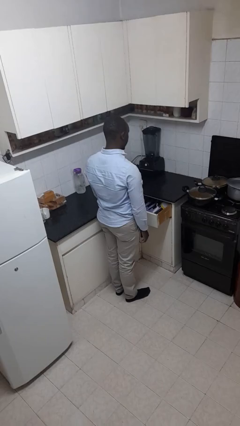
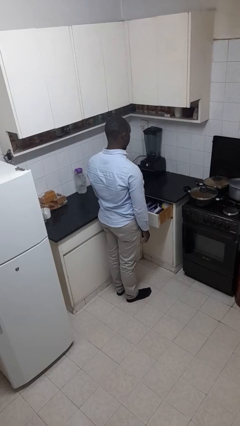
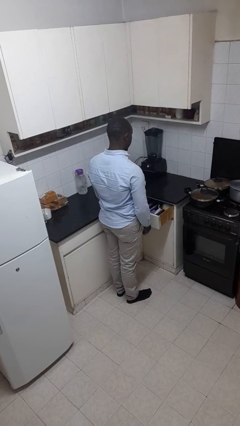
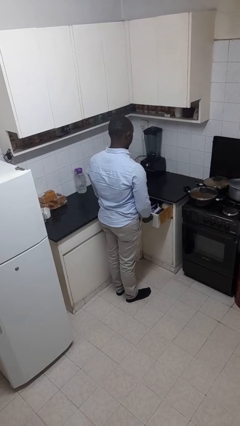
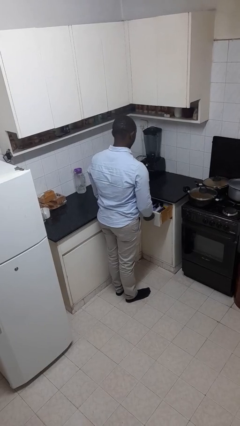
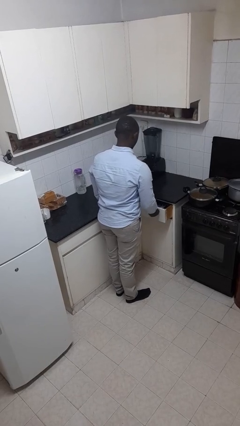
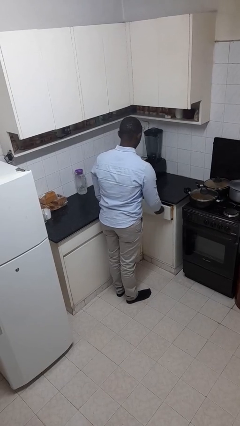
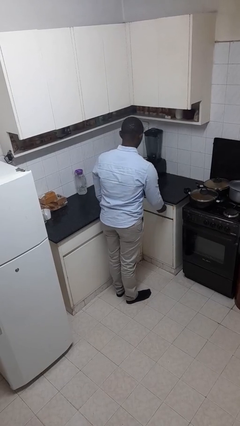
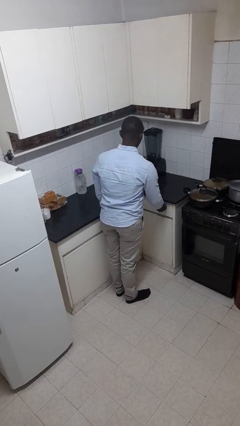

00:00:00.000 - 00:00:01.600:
person closes kitchen drawer

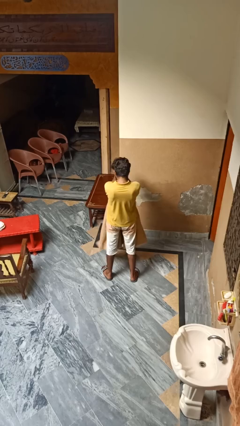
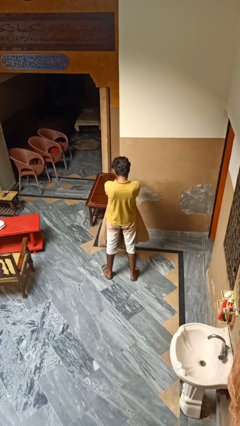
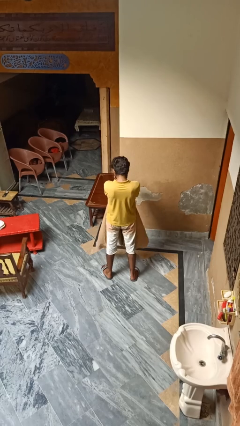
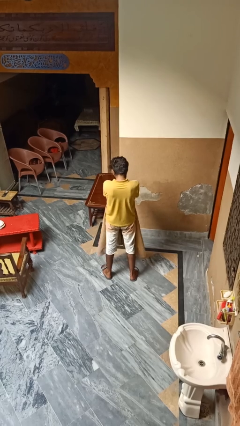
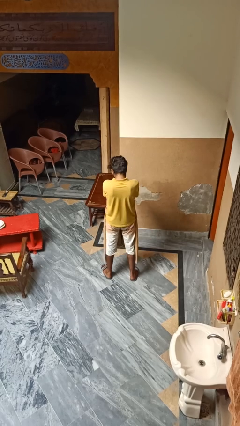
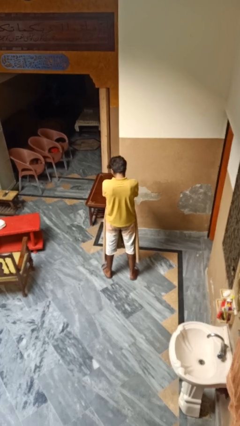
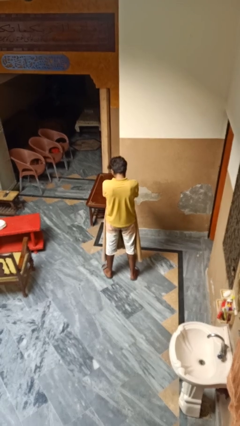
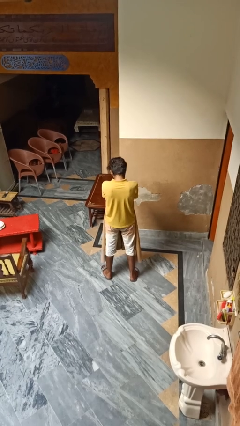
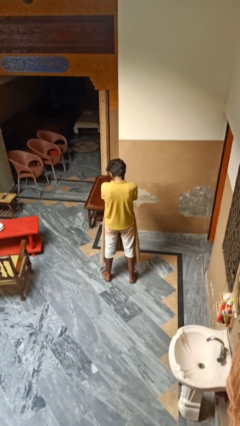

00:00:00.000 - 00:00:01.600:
person unfolds blanket

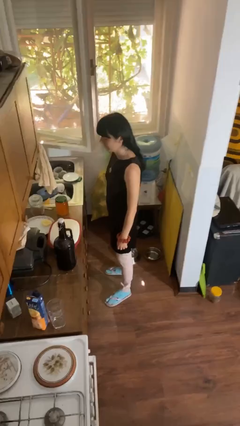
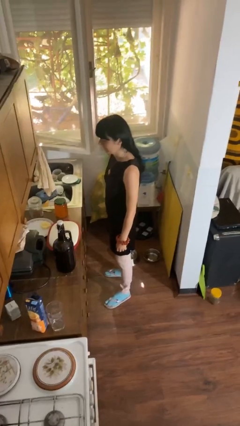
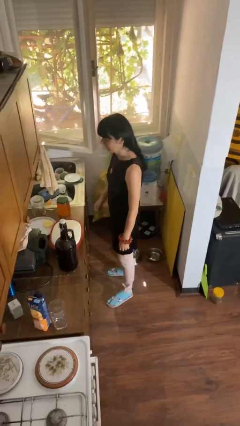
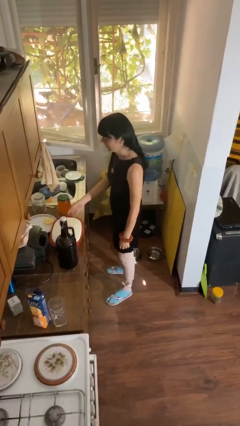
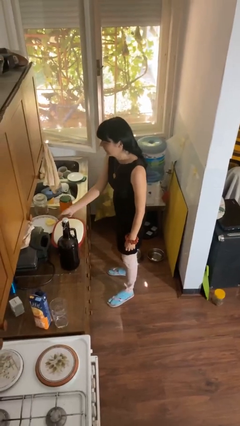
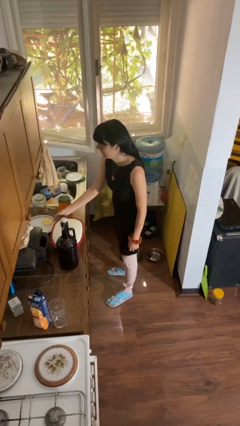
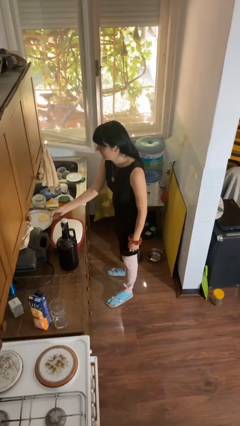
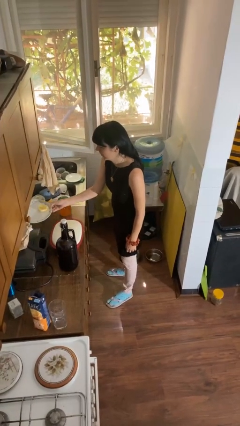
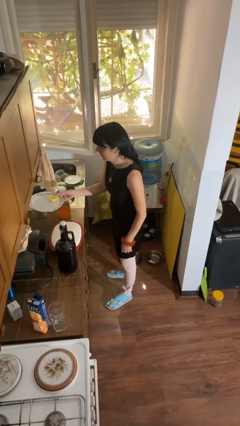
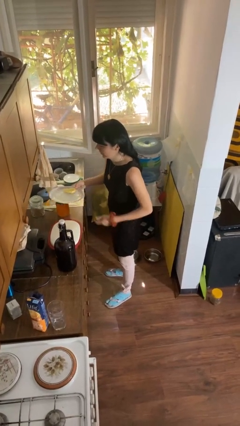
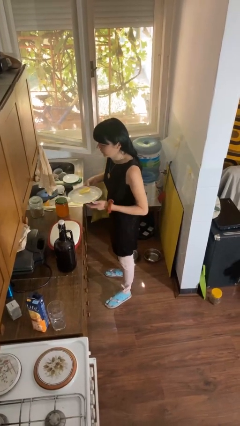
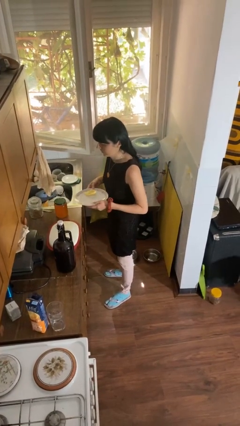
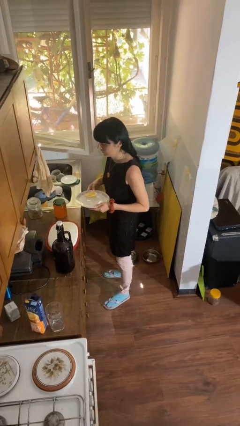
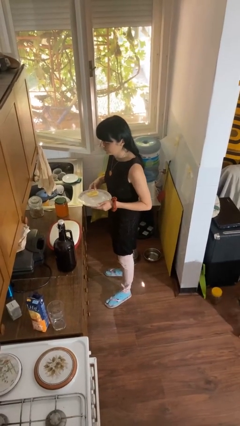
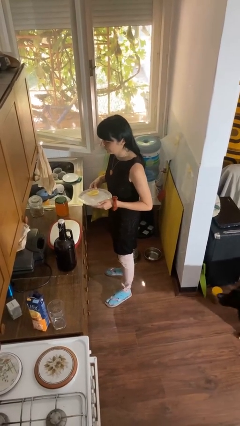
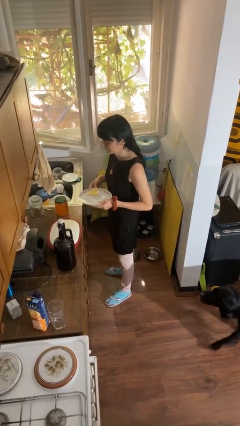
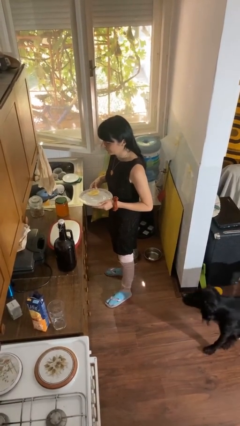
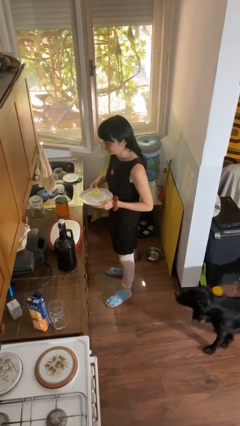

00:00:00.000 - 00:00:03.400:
person picks up object from countertop

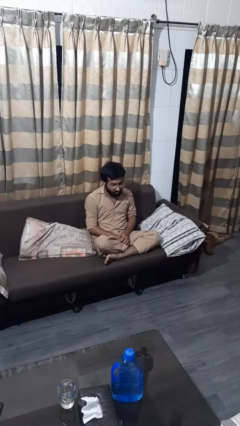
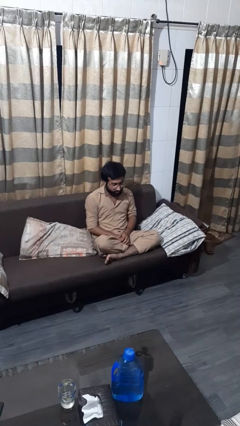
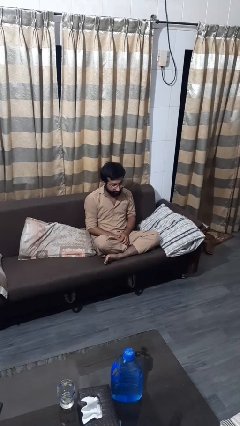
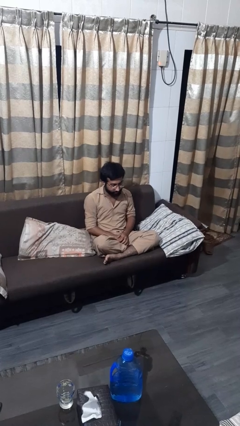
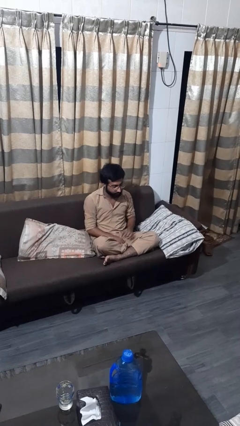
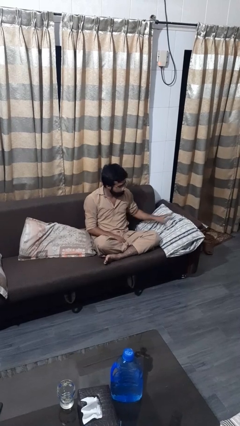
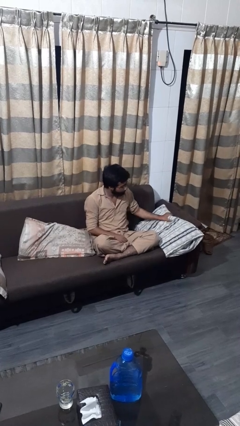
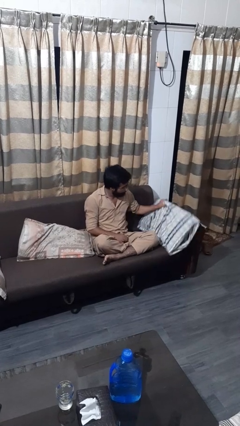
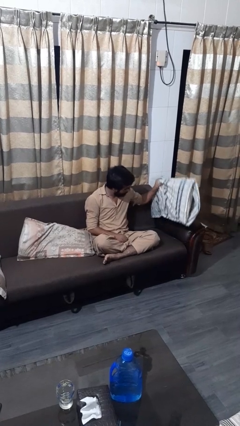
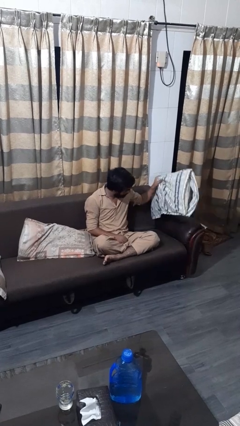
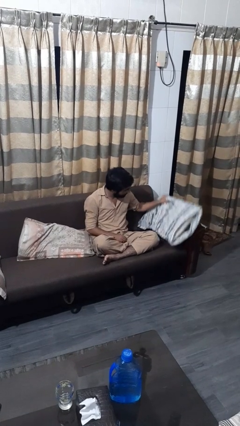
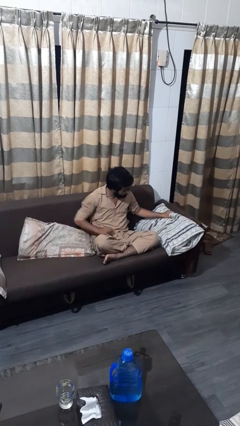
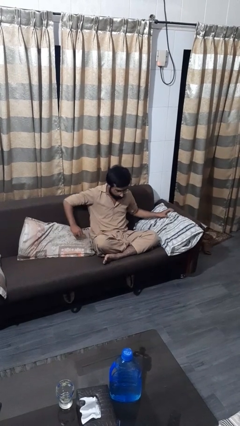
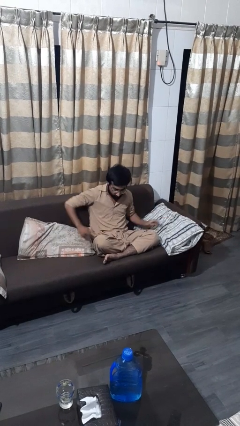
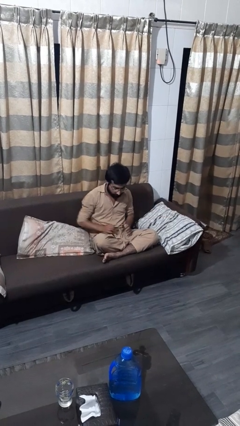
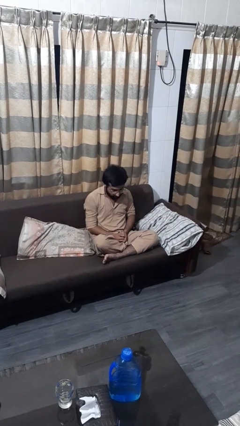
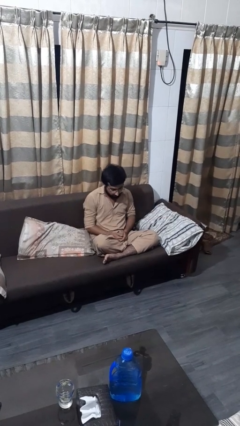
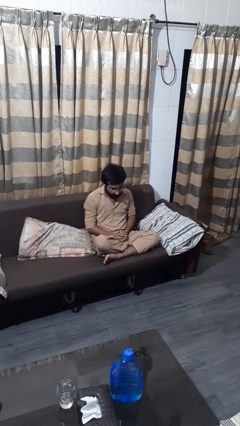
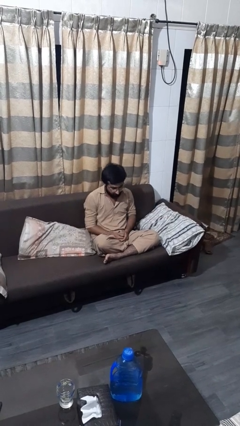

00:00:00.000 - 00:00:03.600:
person searches in couch

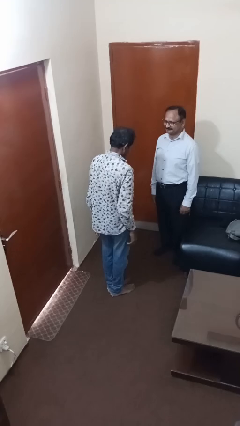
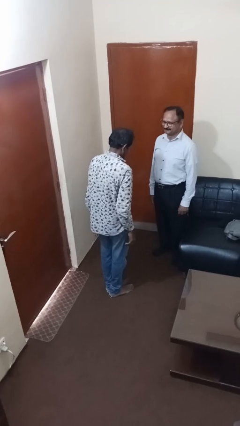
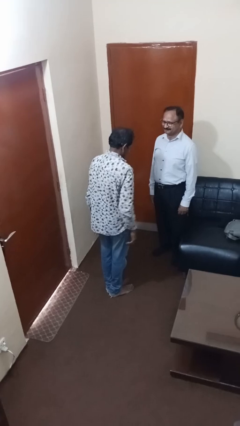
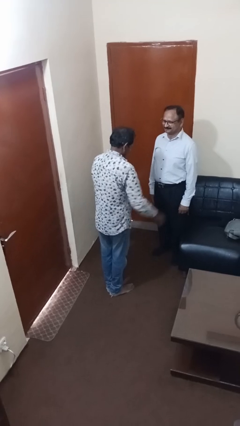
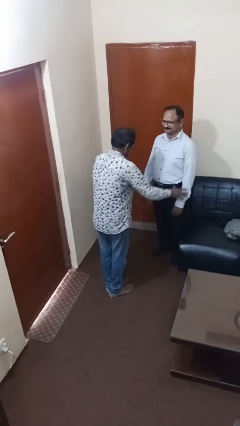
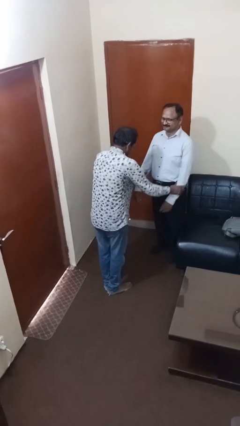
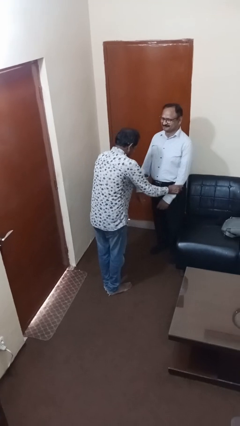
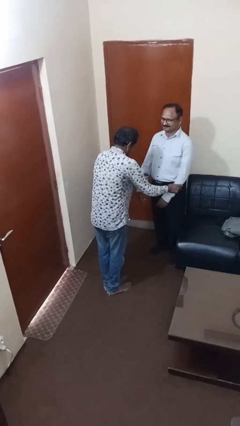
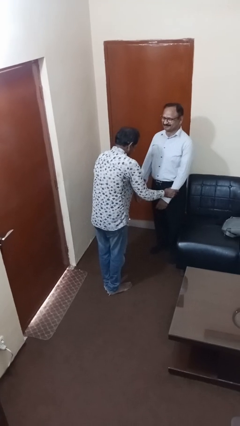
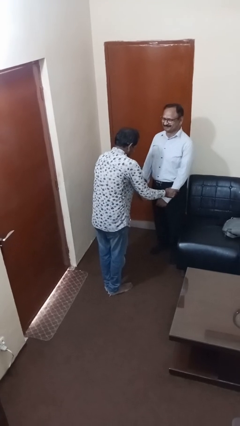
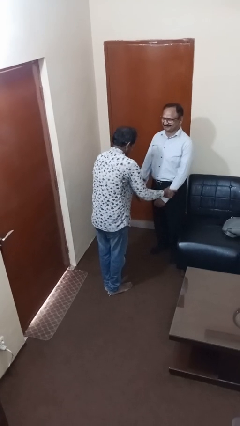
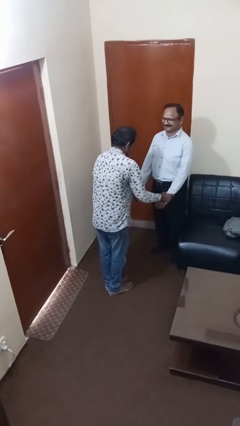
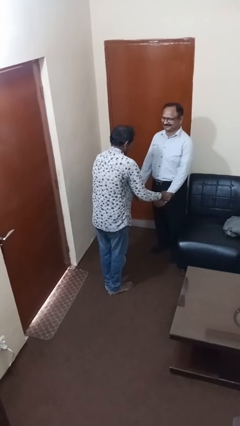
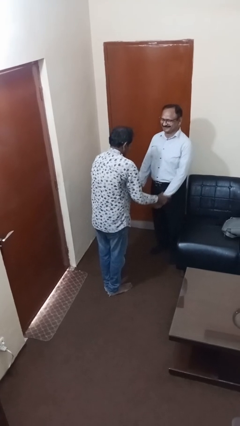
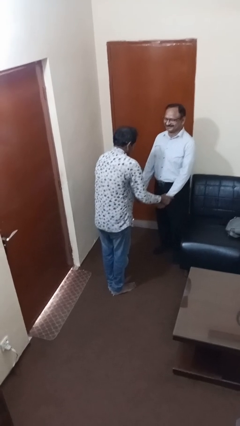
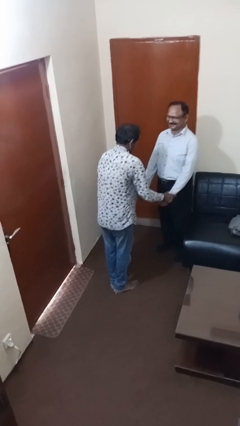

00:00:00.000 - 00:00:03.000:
person grabs person by forearm

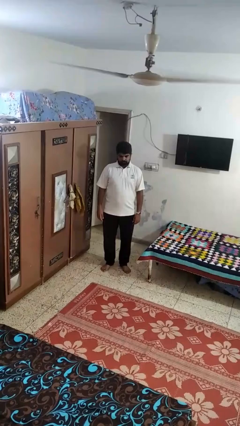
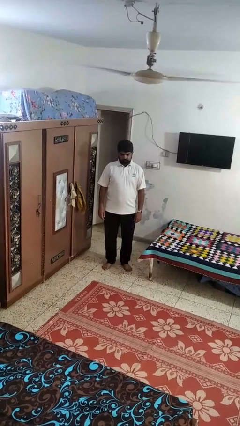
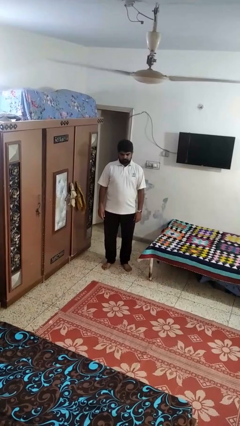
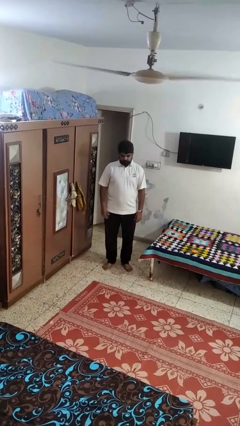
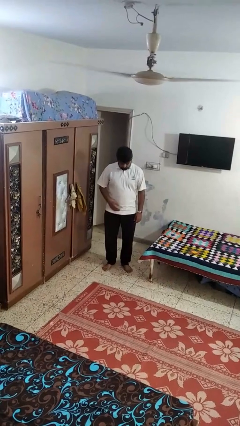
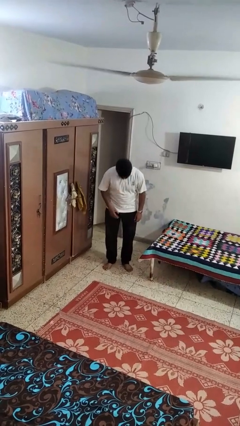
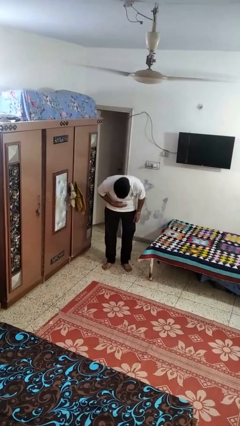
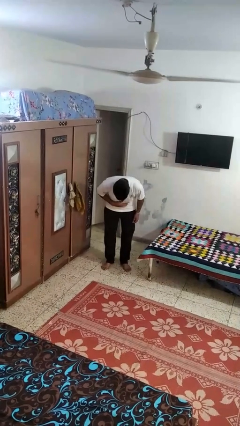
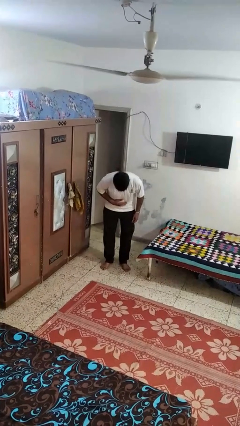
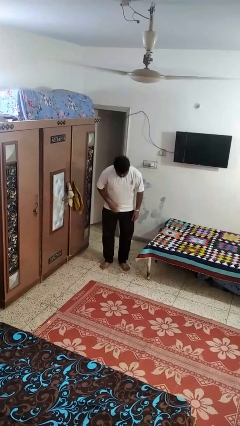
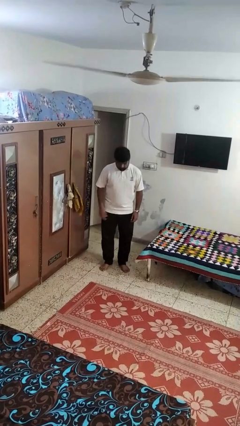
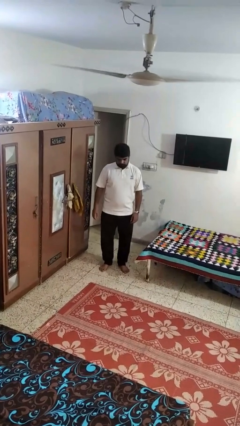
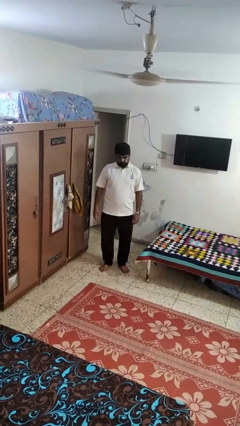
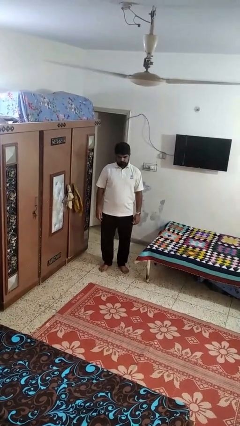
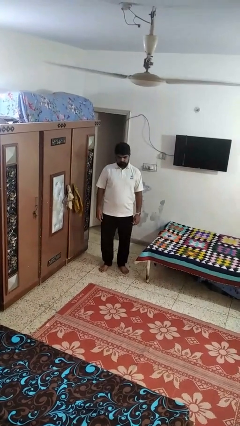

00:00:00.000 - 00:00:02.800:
person bows

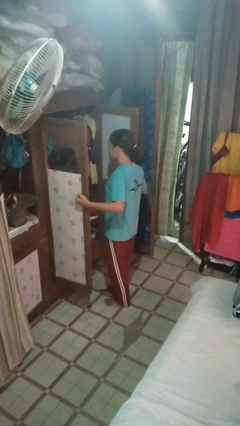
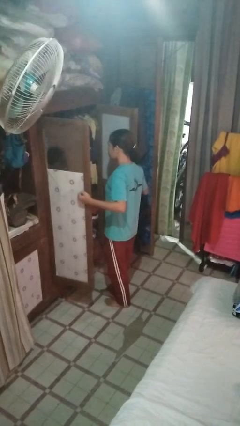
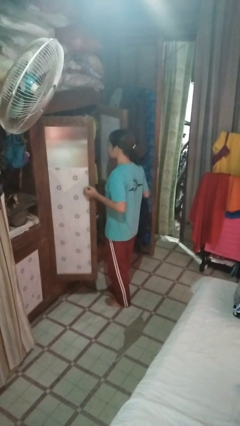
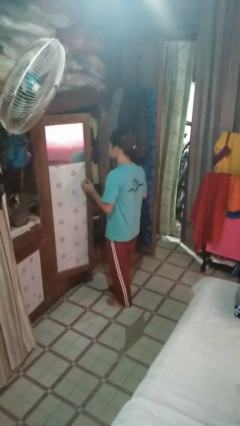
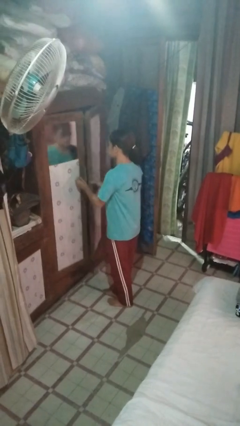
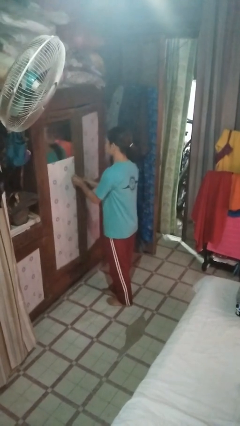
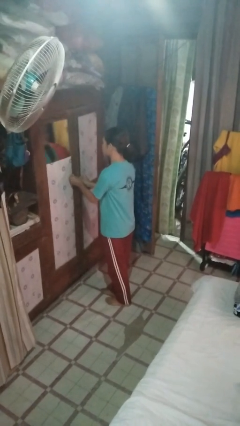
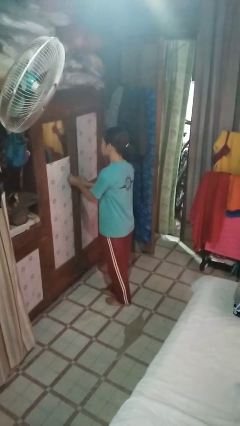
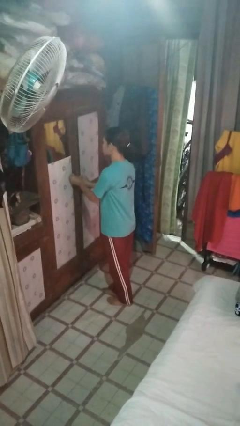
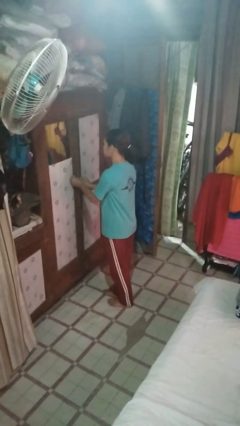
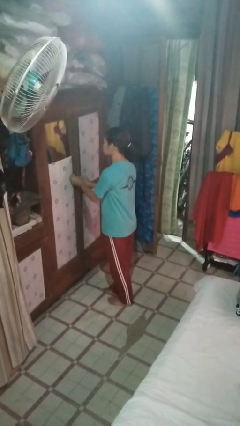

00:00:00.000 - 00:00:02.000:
person closes closet door
